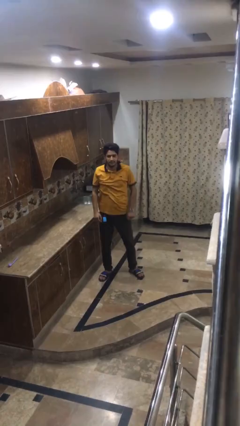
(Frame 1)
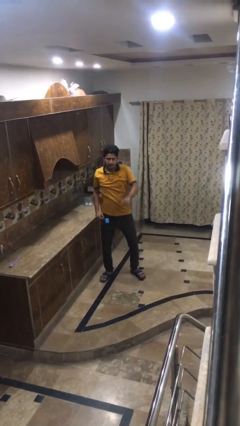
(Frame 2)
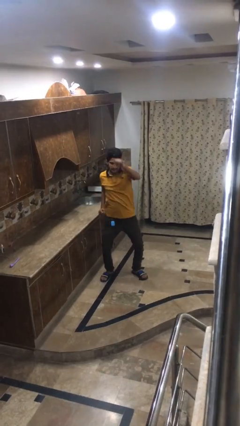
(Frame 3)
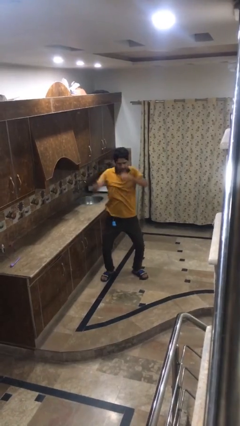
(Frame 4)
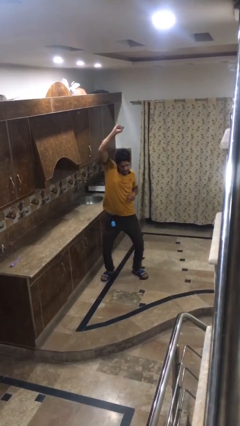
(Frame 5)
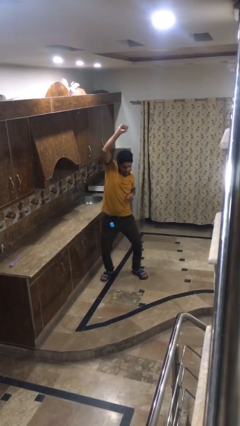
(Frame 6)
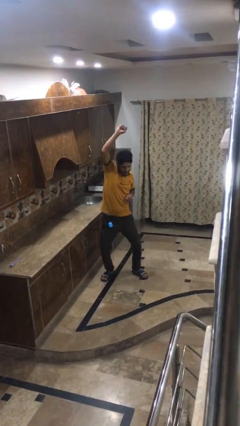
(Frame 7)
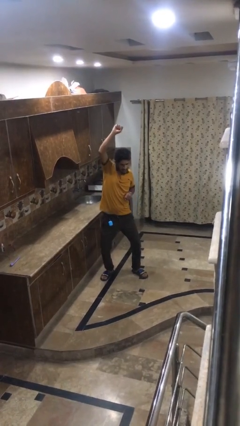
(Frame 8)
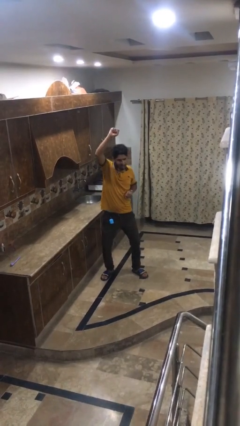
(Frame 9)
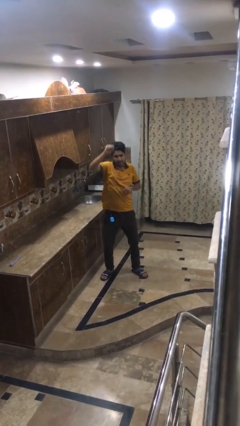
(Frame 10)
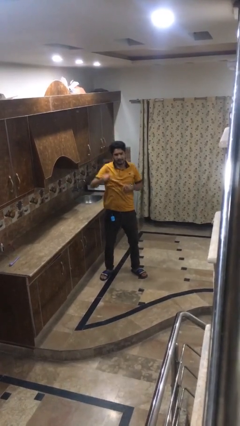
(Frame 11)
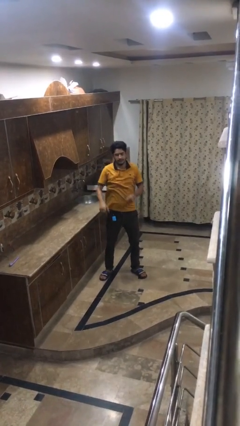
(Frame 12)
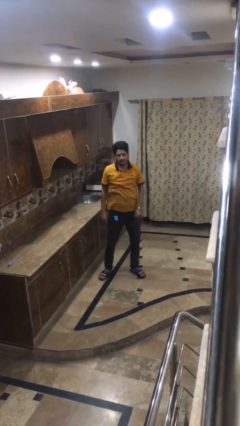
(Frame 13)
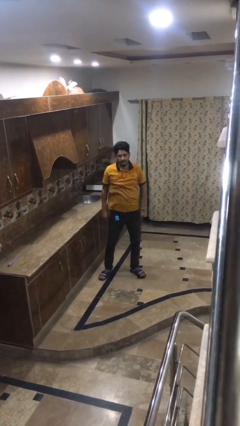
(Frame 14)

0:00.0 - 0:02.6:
person punches

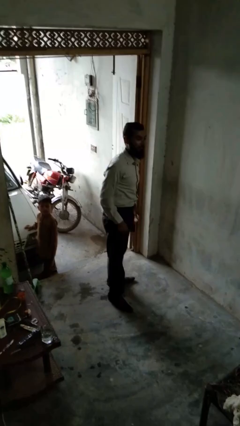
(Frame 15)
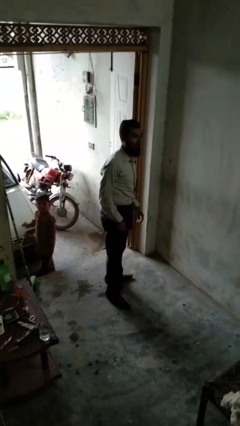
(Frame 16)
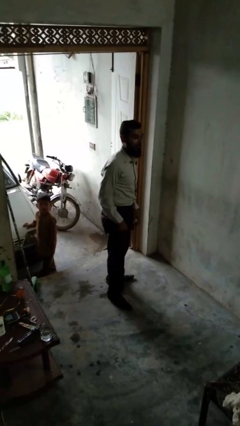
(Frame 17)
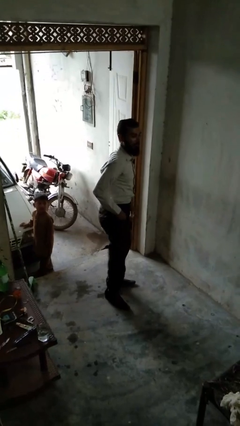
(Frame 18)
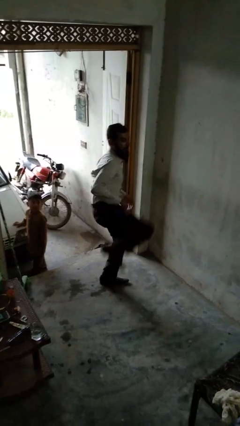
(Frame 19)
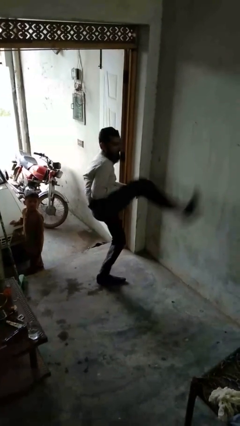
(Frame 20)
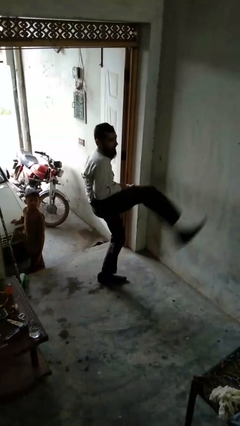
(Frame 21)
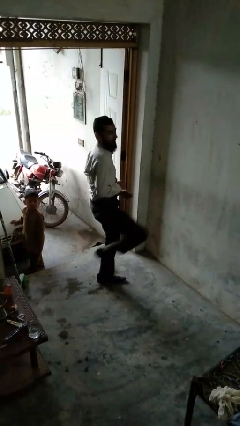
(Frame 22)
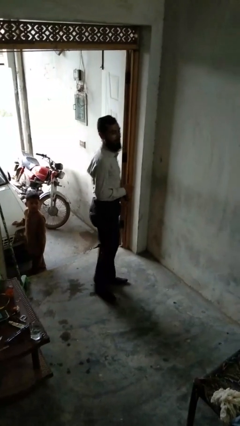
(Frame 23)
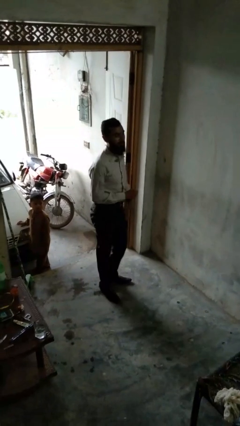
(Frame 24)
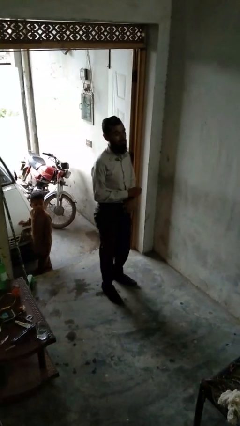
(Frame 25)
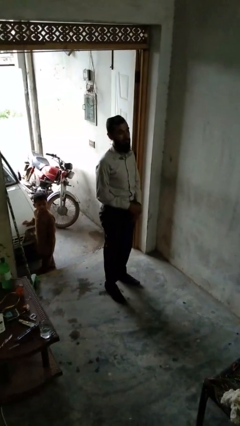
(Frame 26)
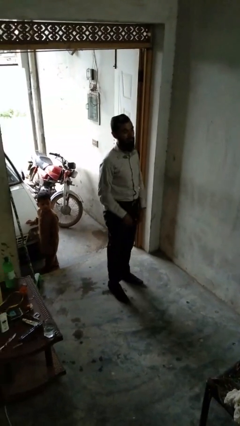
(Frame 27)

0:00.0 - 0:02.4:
person karate kicks

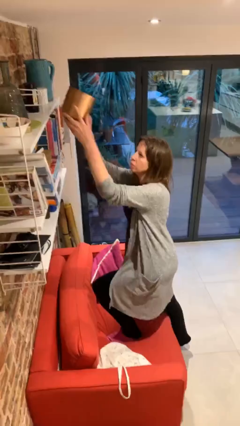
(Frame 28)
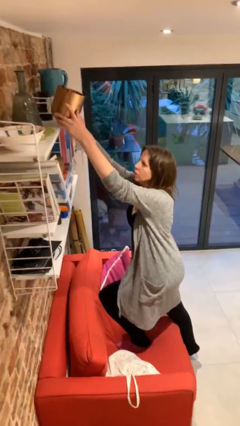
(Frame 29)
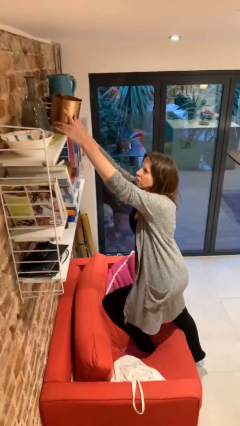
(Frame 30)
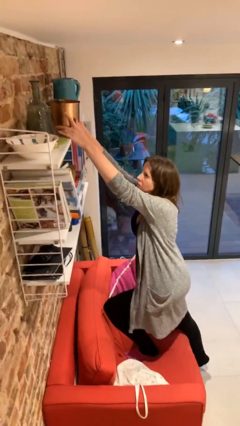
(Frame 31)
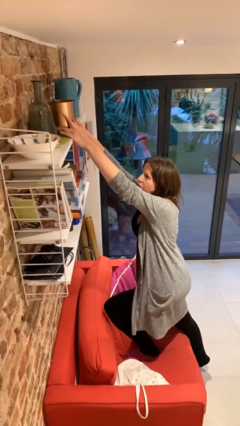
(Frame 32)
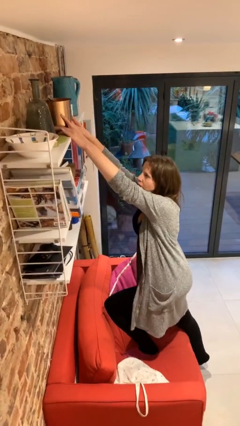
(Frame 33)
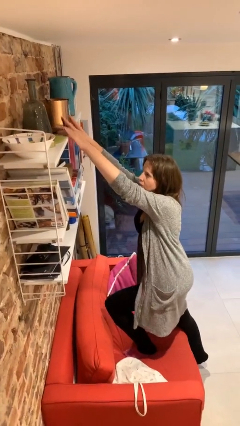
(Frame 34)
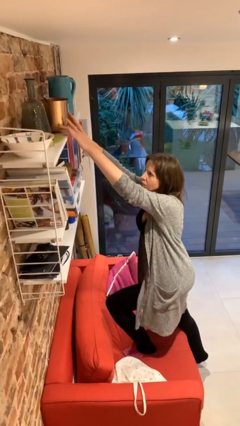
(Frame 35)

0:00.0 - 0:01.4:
person puts down object on shelf

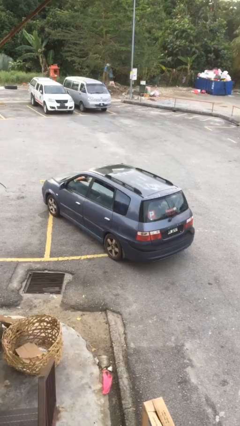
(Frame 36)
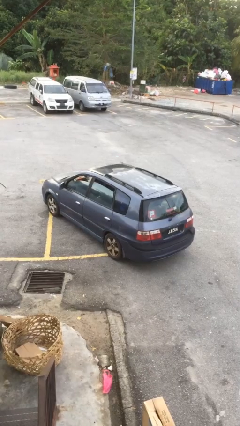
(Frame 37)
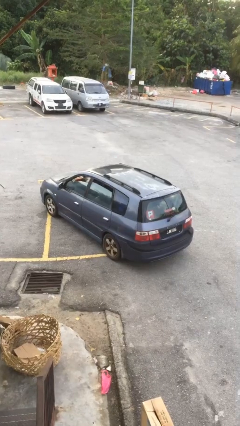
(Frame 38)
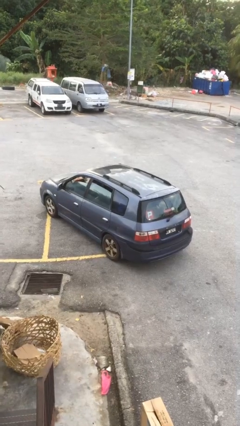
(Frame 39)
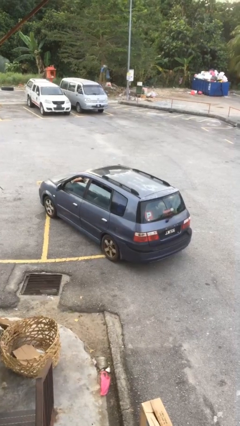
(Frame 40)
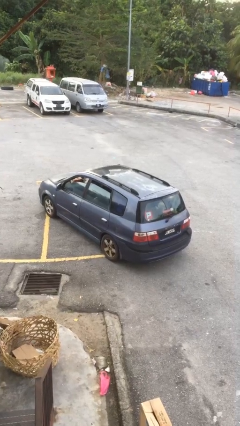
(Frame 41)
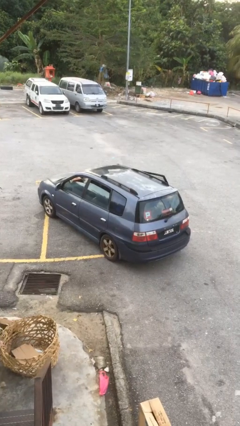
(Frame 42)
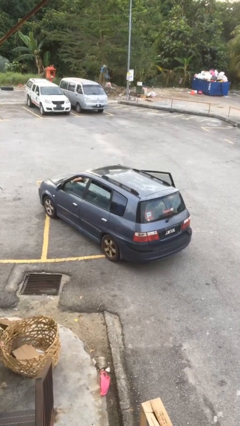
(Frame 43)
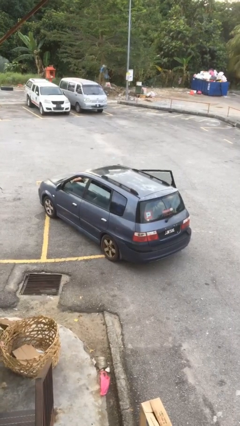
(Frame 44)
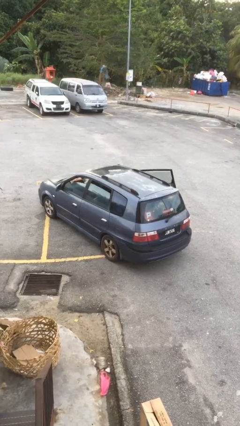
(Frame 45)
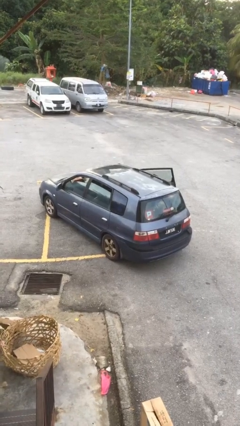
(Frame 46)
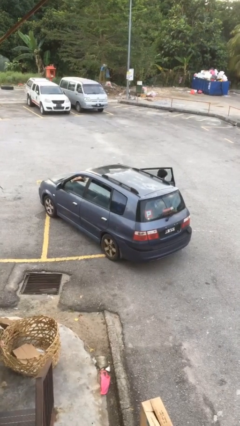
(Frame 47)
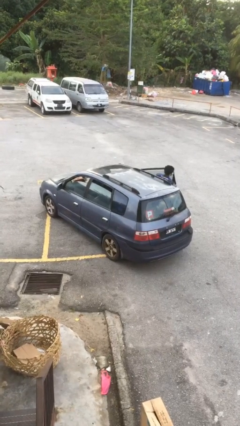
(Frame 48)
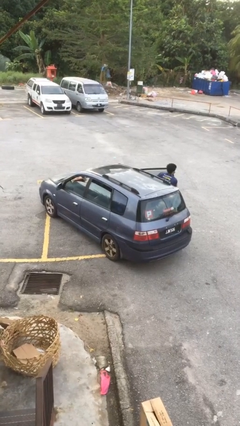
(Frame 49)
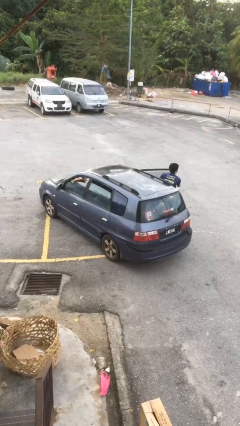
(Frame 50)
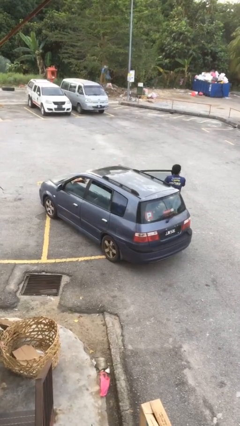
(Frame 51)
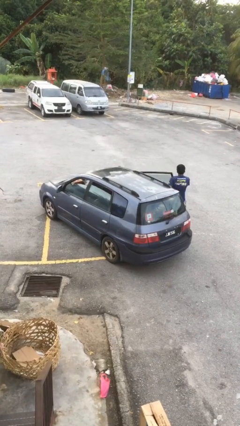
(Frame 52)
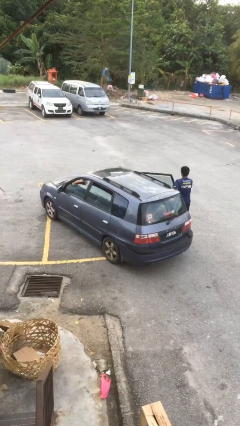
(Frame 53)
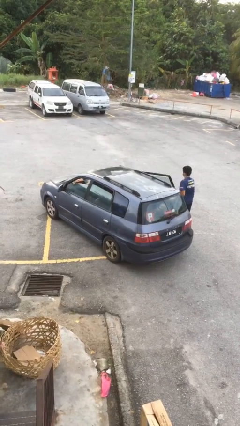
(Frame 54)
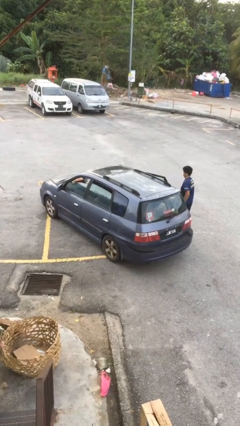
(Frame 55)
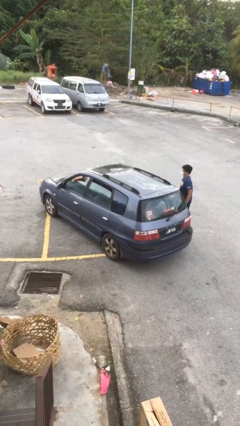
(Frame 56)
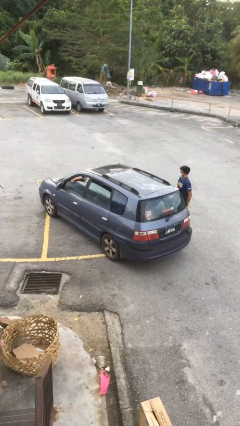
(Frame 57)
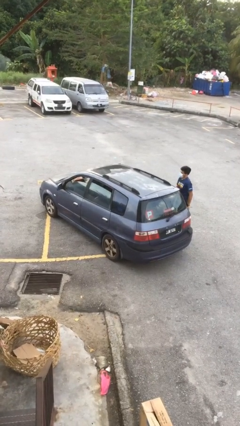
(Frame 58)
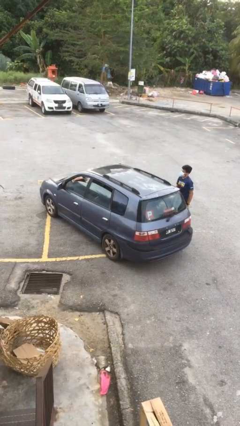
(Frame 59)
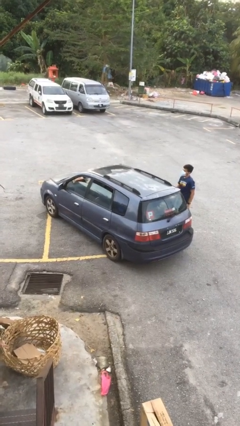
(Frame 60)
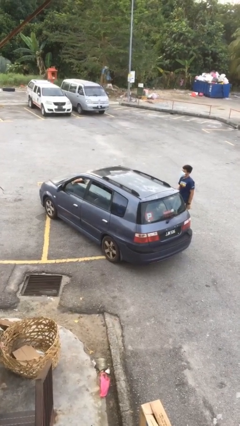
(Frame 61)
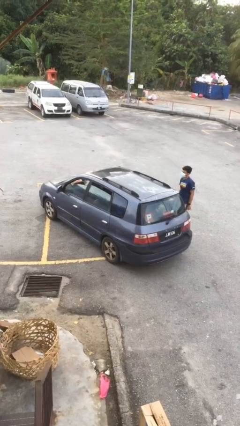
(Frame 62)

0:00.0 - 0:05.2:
car drops off person

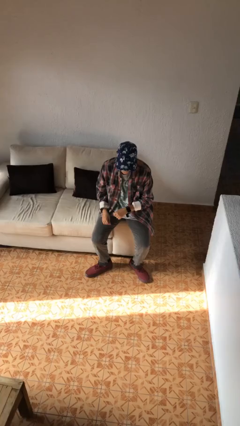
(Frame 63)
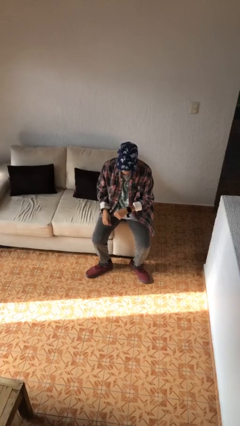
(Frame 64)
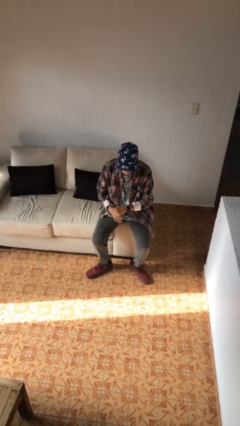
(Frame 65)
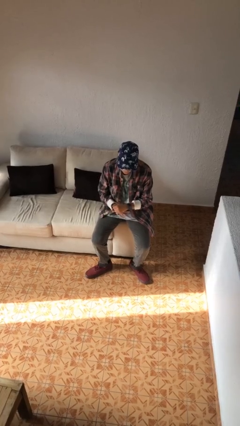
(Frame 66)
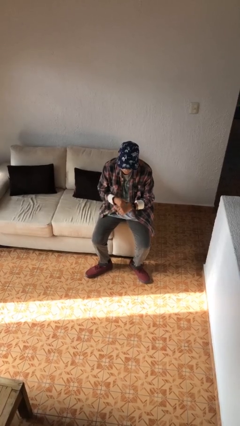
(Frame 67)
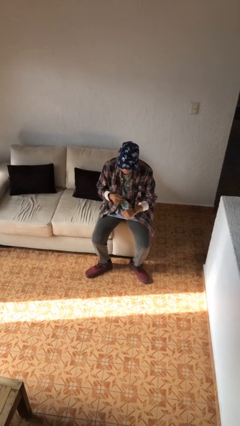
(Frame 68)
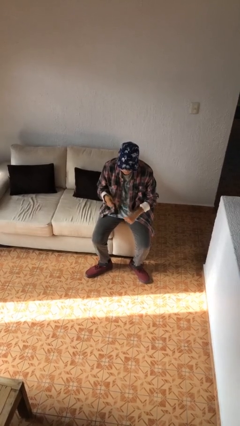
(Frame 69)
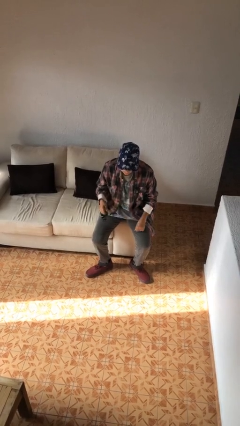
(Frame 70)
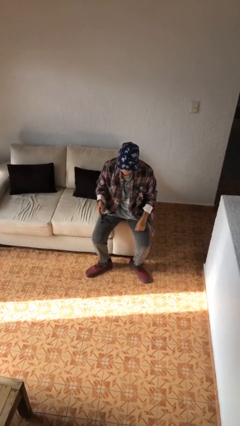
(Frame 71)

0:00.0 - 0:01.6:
person takes off wristwatch

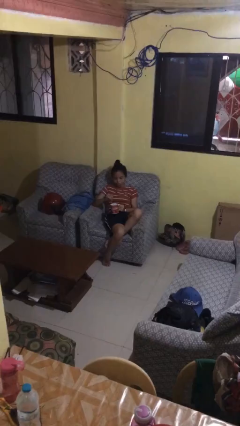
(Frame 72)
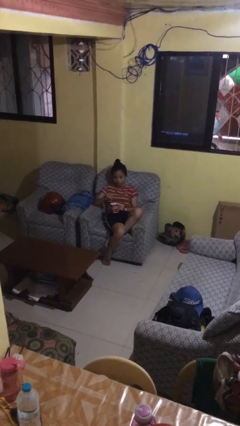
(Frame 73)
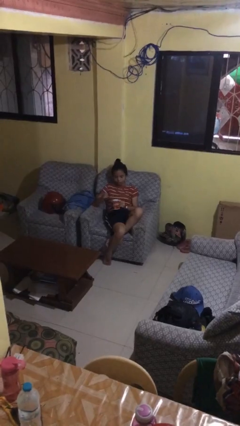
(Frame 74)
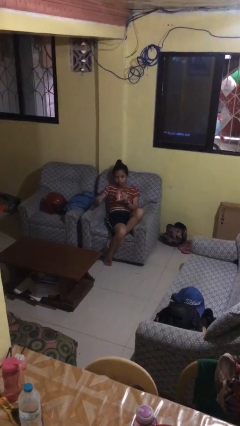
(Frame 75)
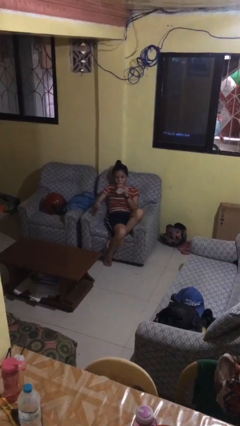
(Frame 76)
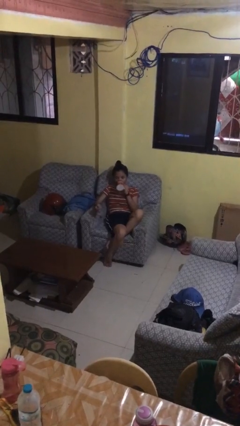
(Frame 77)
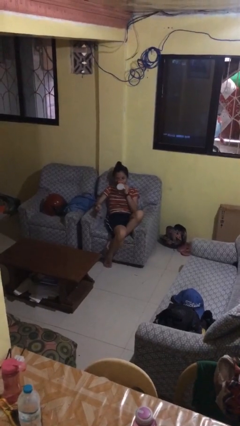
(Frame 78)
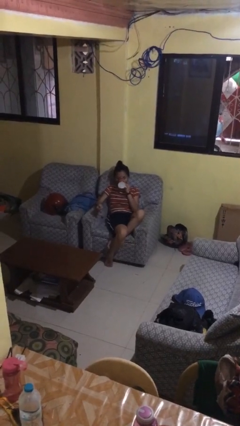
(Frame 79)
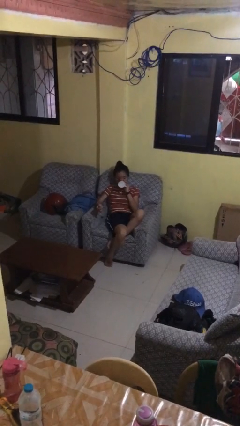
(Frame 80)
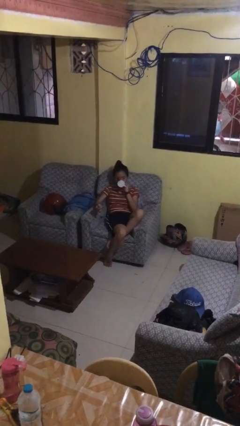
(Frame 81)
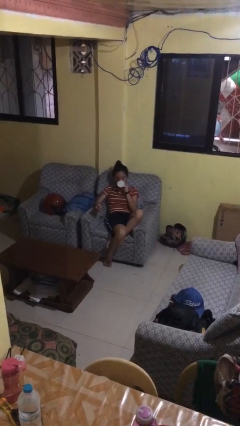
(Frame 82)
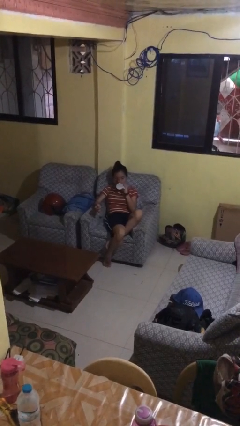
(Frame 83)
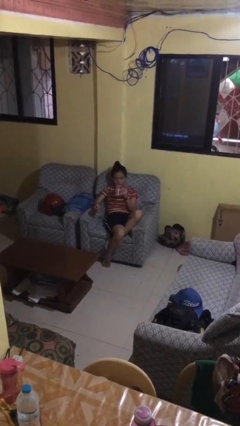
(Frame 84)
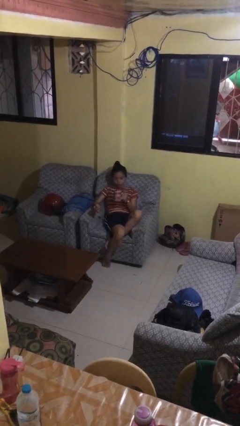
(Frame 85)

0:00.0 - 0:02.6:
person drinks from mug

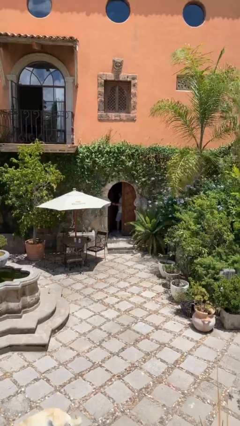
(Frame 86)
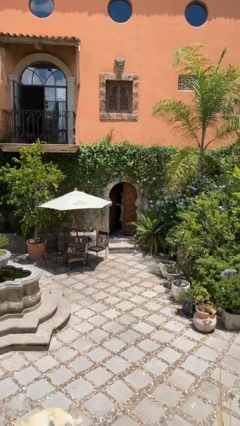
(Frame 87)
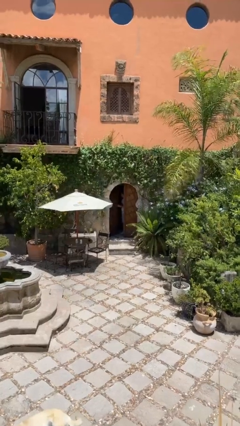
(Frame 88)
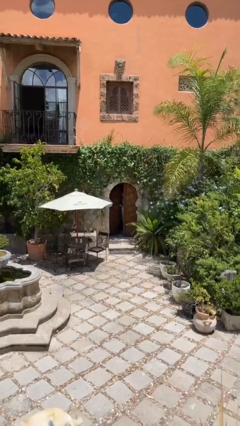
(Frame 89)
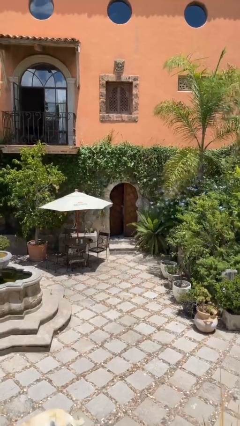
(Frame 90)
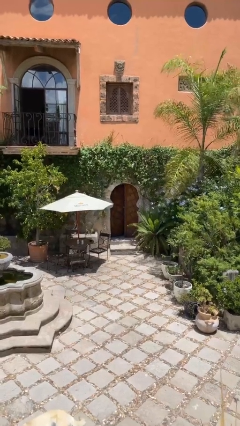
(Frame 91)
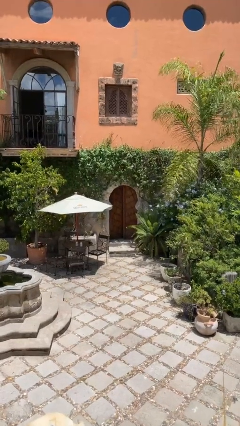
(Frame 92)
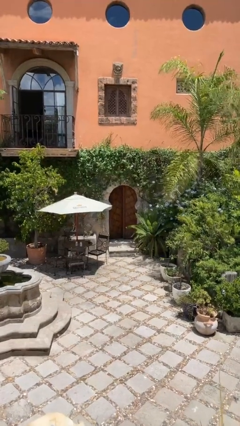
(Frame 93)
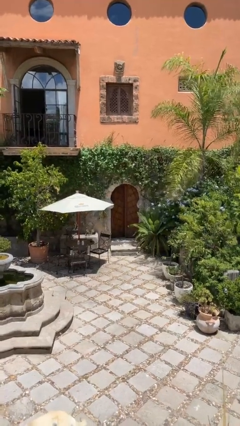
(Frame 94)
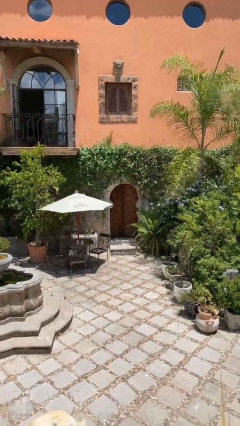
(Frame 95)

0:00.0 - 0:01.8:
person closes facility door
